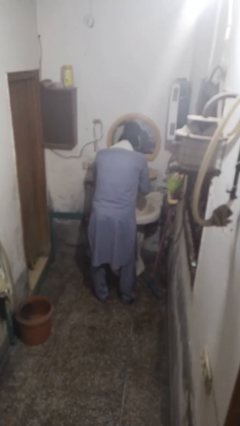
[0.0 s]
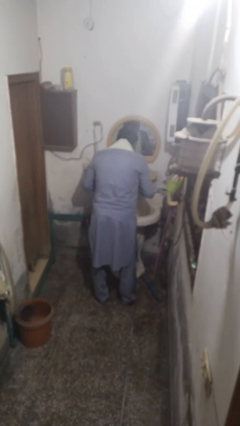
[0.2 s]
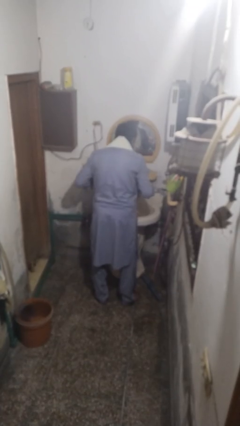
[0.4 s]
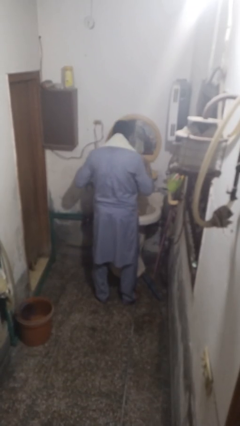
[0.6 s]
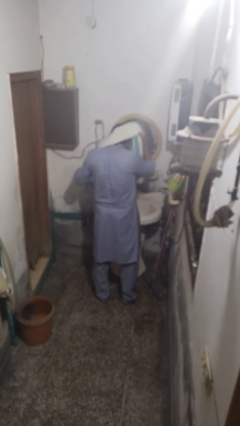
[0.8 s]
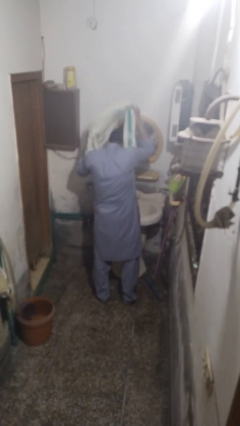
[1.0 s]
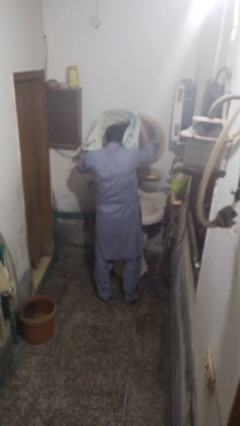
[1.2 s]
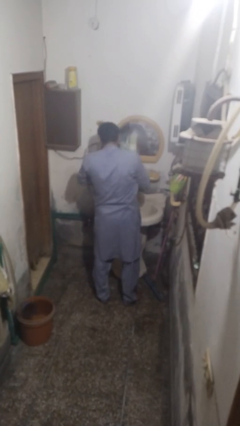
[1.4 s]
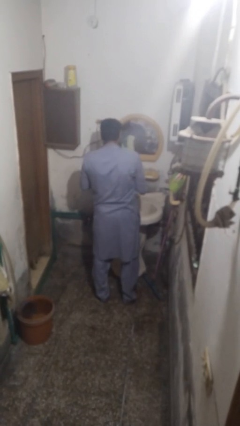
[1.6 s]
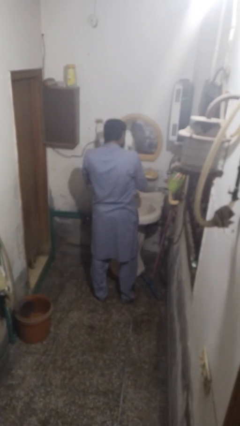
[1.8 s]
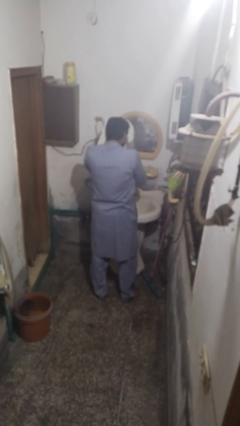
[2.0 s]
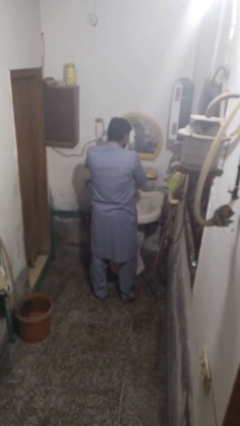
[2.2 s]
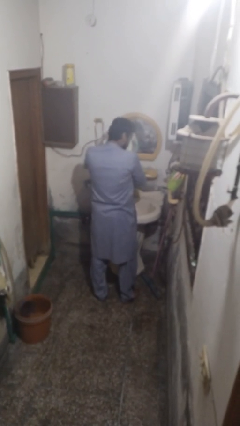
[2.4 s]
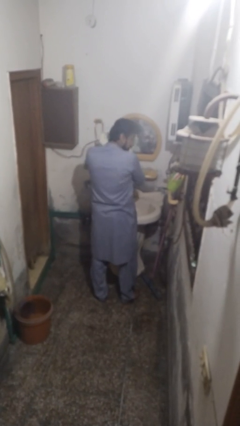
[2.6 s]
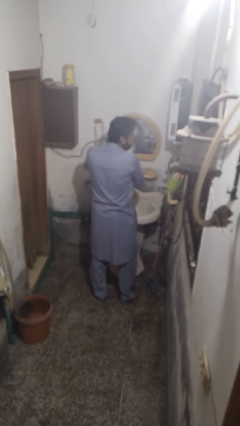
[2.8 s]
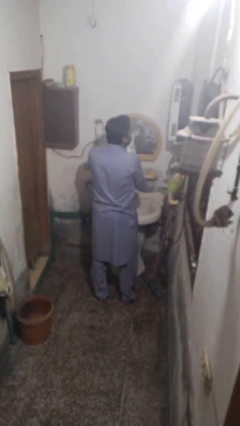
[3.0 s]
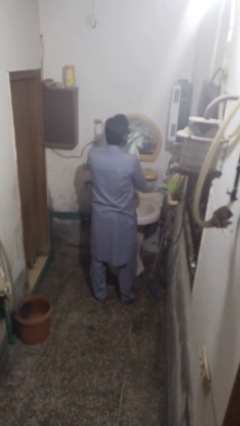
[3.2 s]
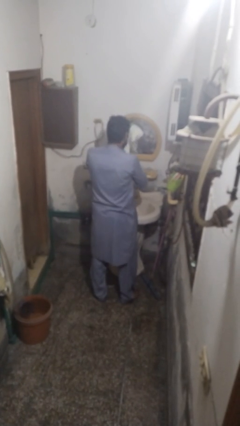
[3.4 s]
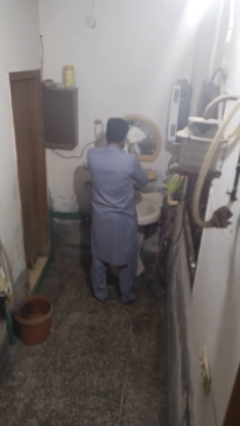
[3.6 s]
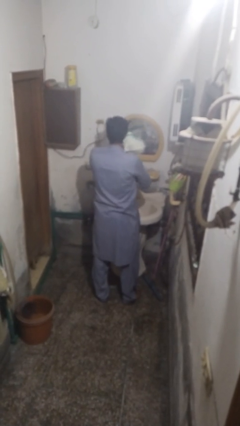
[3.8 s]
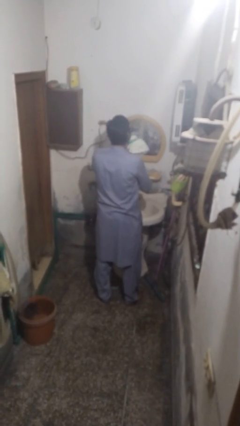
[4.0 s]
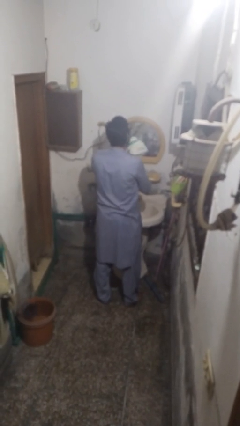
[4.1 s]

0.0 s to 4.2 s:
person dries face with towel

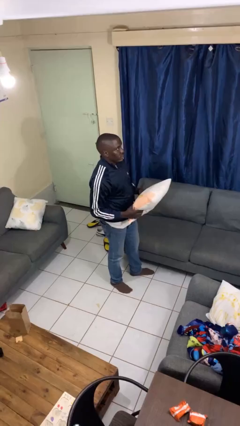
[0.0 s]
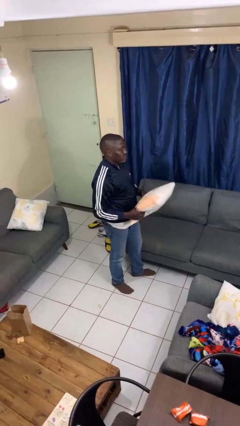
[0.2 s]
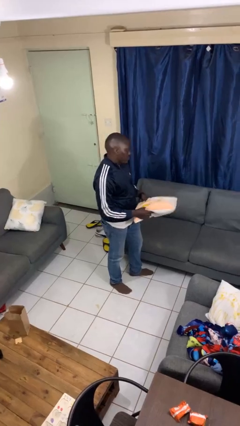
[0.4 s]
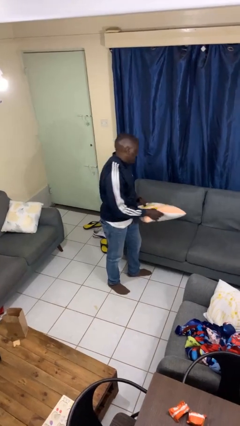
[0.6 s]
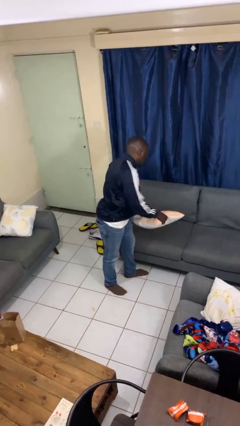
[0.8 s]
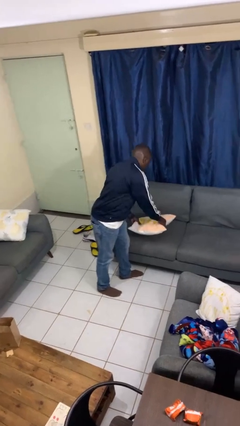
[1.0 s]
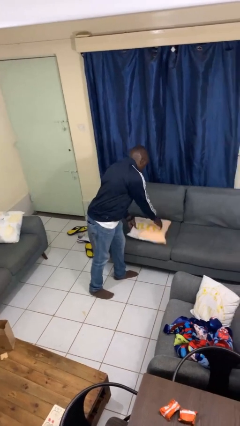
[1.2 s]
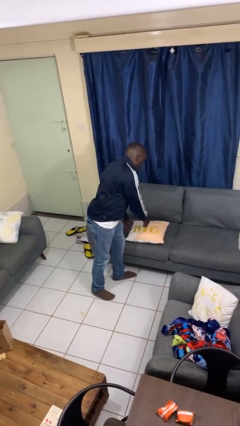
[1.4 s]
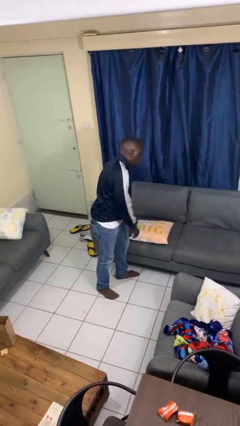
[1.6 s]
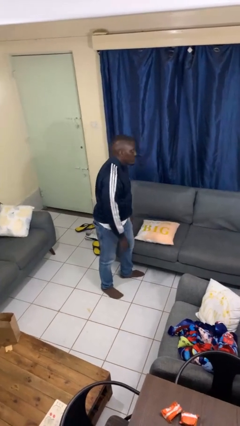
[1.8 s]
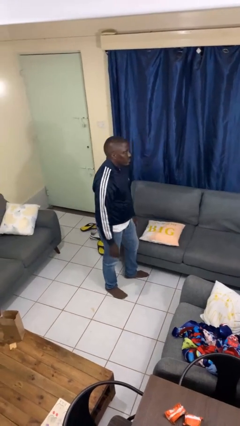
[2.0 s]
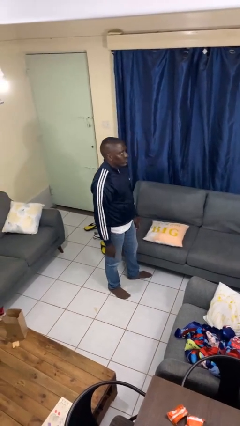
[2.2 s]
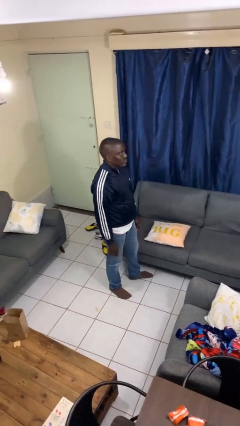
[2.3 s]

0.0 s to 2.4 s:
person puts down object on couch

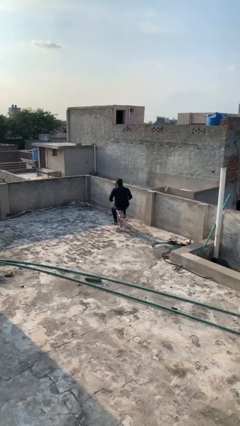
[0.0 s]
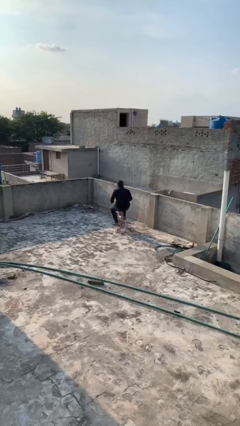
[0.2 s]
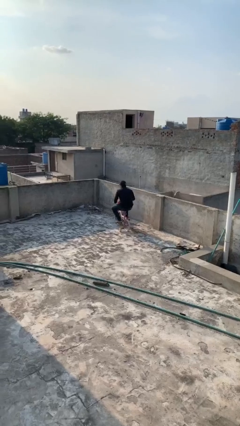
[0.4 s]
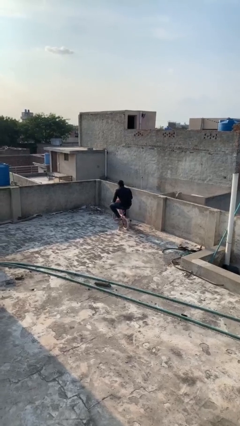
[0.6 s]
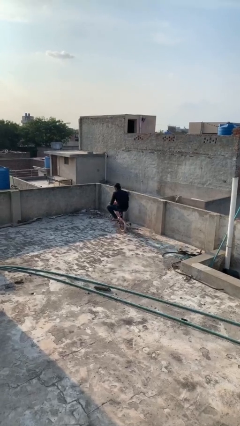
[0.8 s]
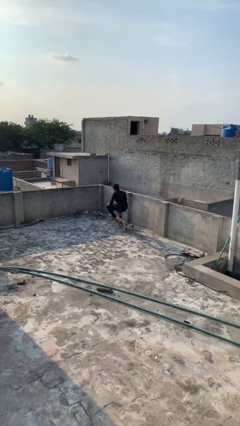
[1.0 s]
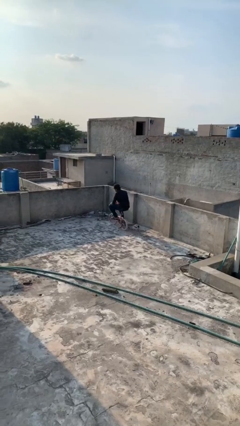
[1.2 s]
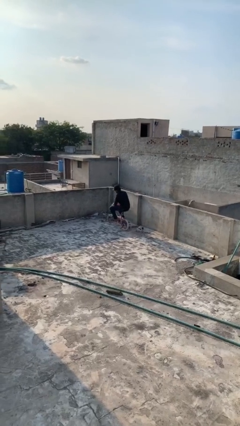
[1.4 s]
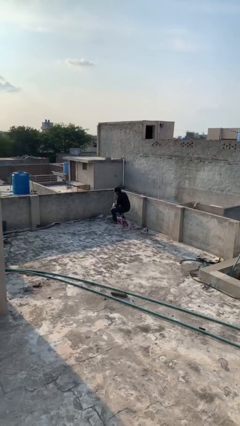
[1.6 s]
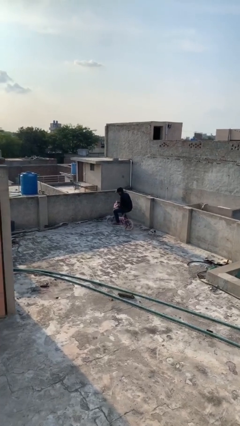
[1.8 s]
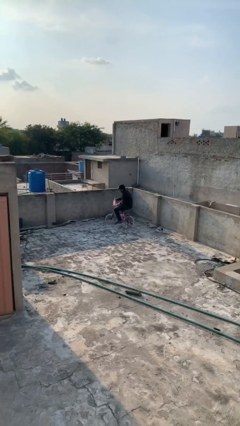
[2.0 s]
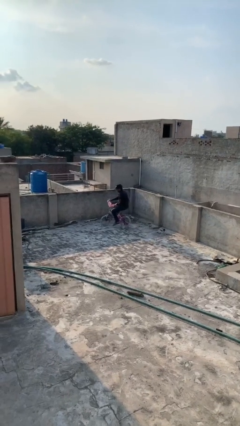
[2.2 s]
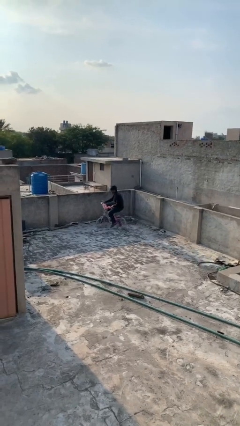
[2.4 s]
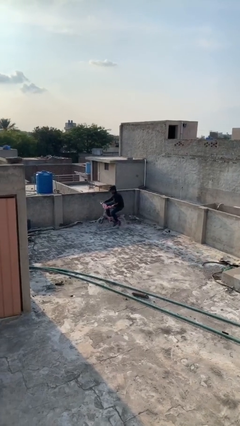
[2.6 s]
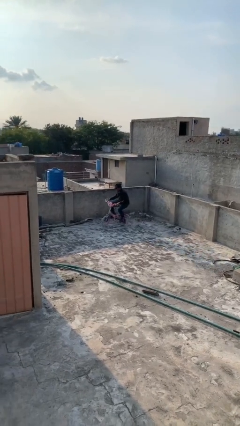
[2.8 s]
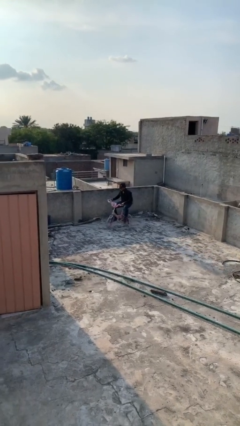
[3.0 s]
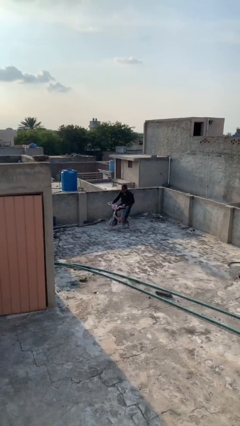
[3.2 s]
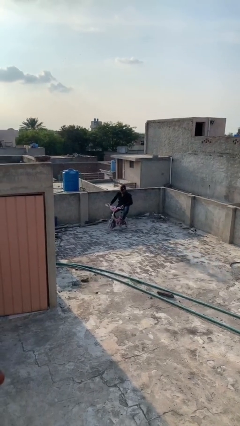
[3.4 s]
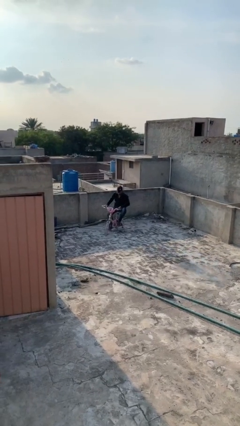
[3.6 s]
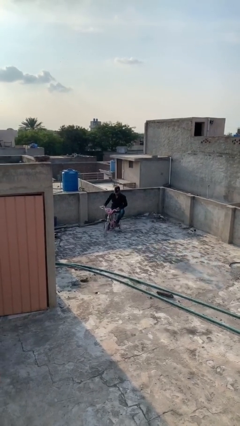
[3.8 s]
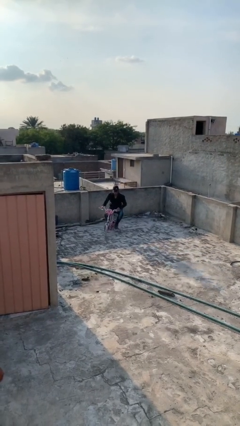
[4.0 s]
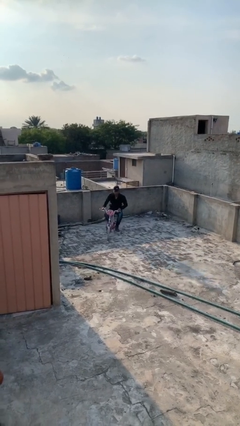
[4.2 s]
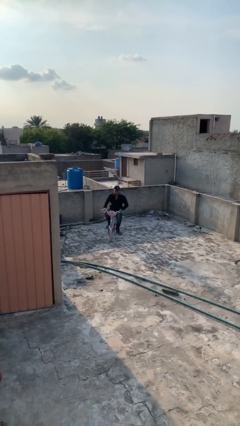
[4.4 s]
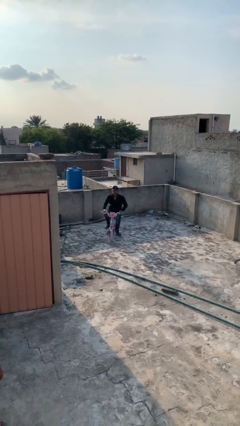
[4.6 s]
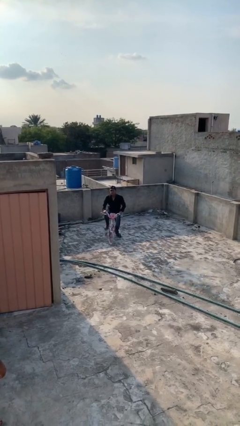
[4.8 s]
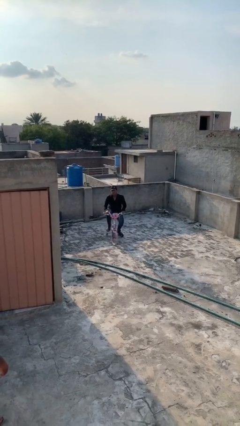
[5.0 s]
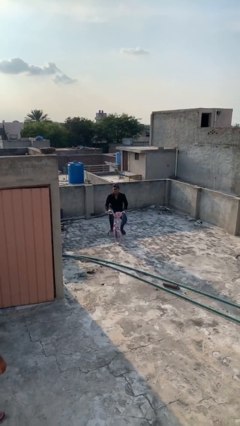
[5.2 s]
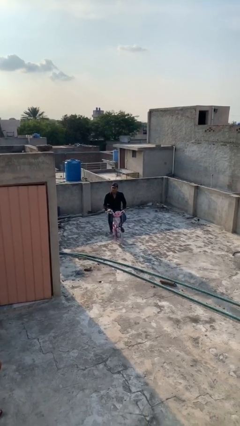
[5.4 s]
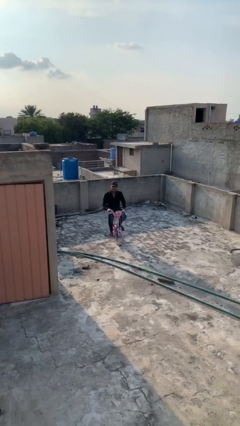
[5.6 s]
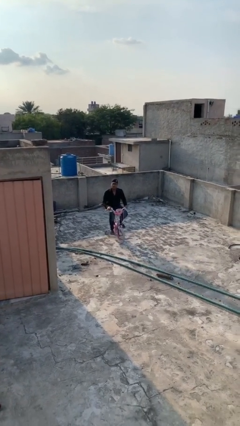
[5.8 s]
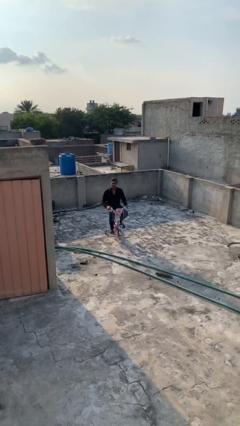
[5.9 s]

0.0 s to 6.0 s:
person rides bicycle

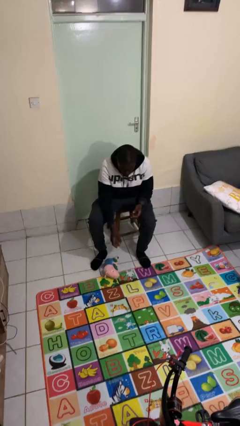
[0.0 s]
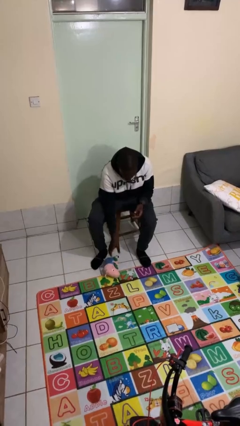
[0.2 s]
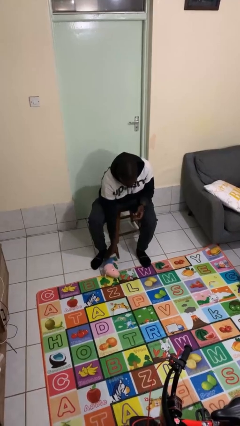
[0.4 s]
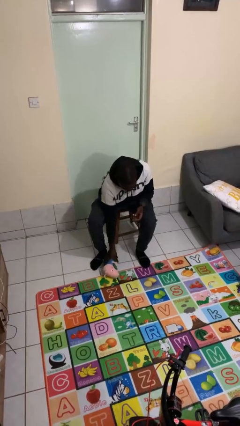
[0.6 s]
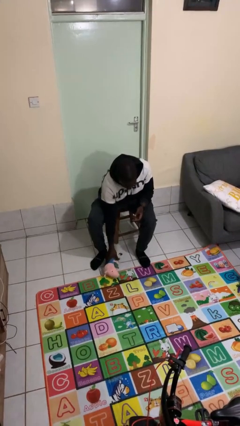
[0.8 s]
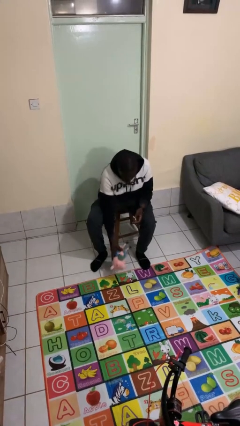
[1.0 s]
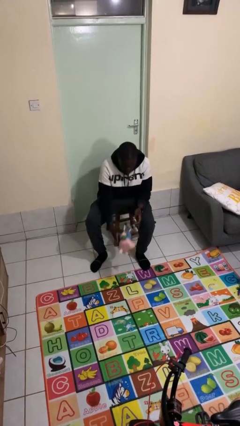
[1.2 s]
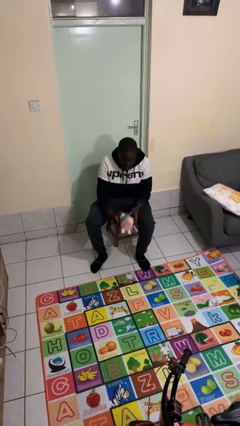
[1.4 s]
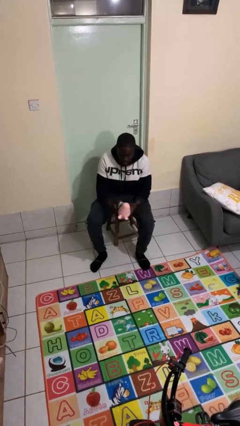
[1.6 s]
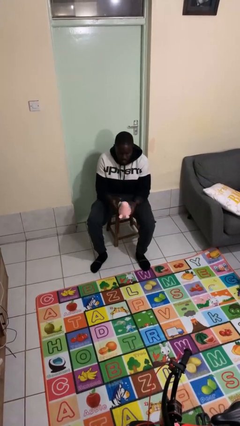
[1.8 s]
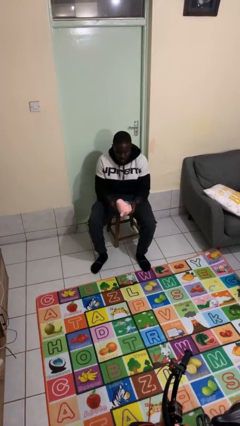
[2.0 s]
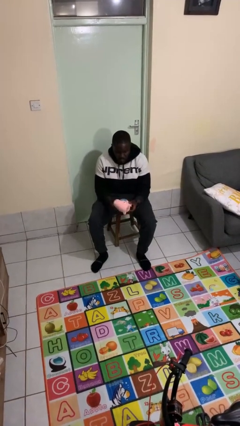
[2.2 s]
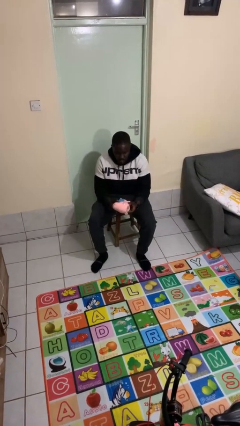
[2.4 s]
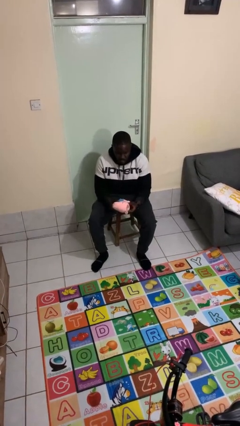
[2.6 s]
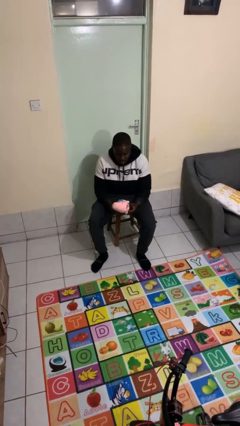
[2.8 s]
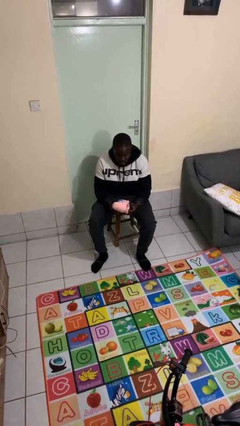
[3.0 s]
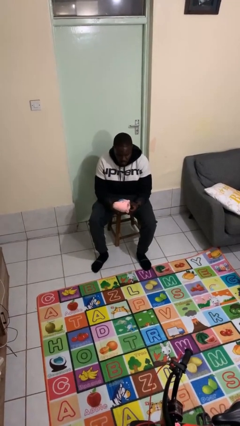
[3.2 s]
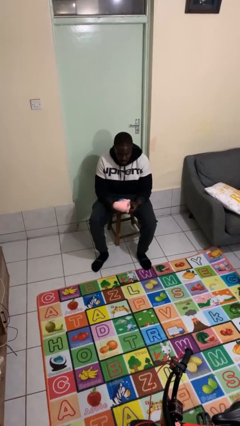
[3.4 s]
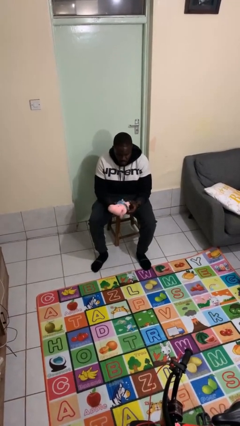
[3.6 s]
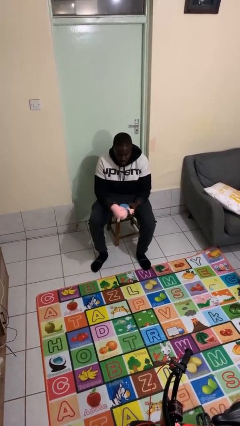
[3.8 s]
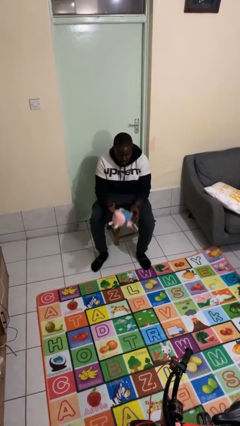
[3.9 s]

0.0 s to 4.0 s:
person picks up object from floor

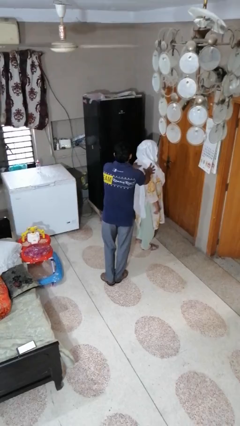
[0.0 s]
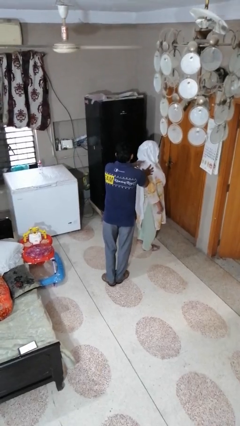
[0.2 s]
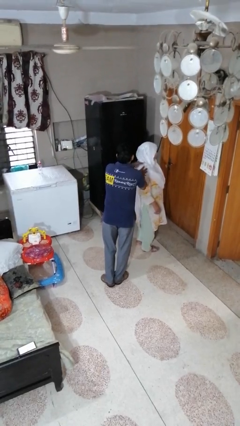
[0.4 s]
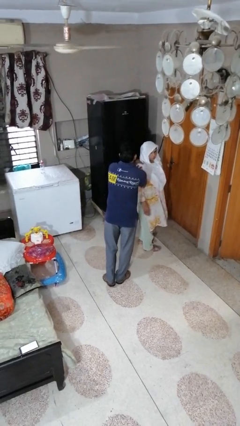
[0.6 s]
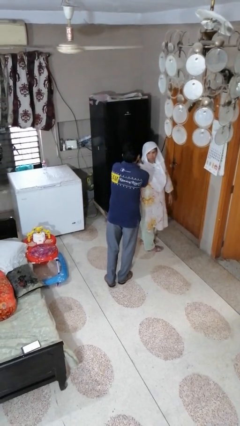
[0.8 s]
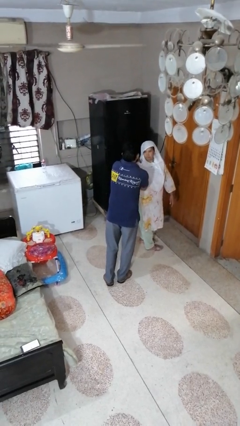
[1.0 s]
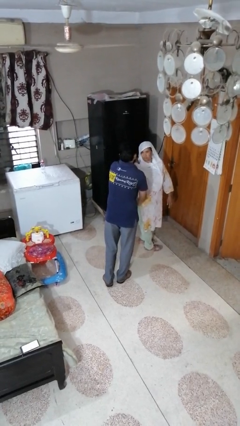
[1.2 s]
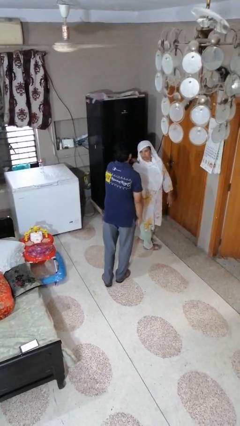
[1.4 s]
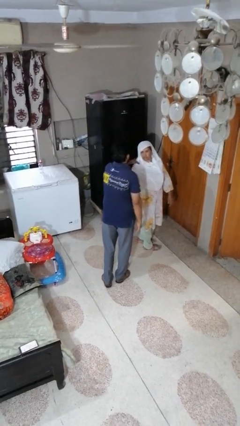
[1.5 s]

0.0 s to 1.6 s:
person spins person around
